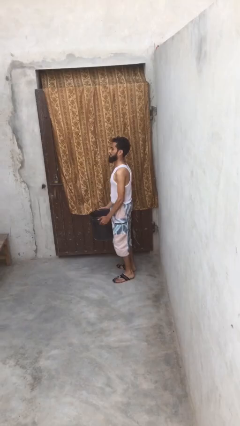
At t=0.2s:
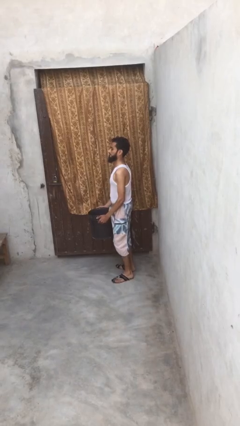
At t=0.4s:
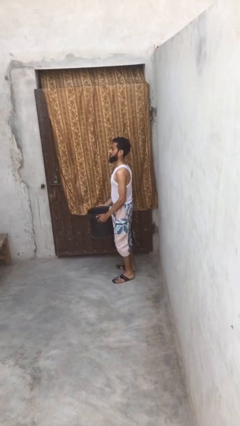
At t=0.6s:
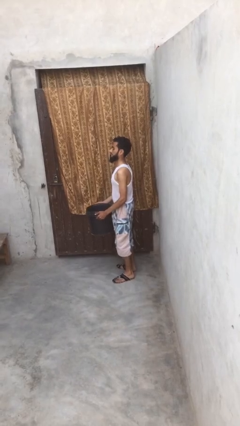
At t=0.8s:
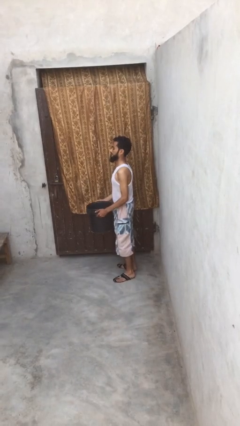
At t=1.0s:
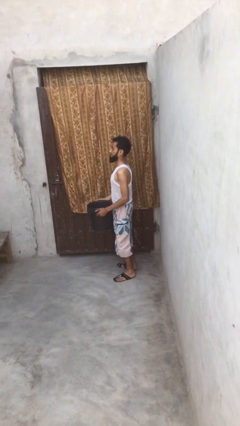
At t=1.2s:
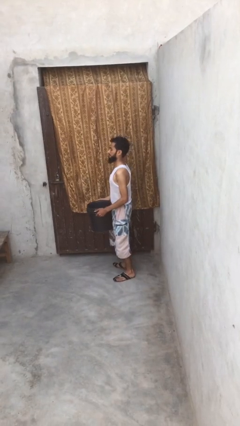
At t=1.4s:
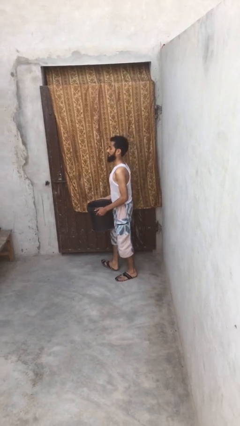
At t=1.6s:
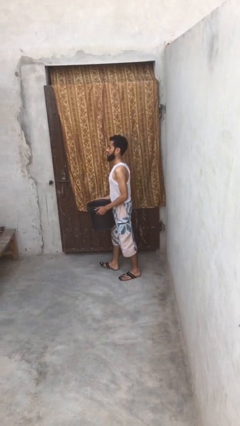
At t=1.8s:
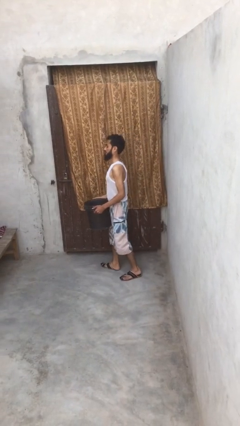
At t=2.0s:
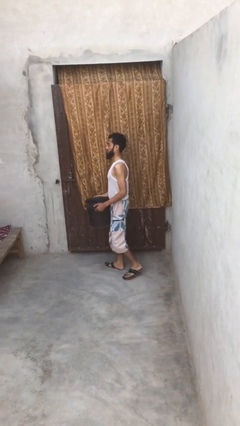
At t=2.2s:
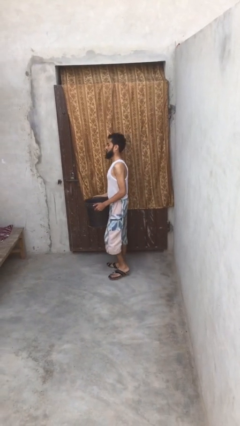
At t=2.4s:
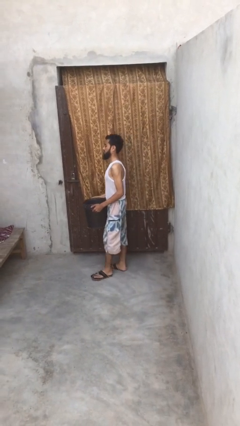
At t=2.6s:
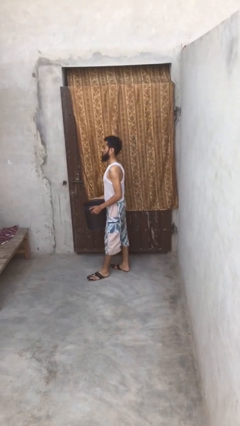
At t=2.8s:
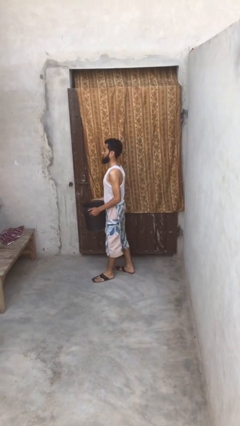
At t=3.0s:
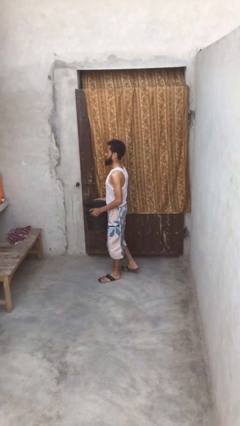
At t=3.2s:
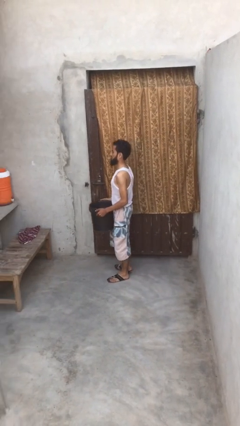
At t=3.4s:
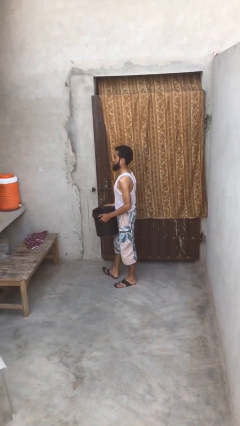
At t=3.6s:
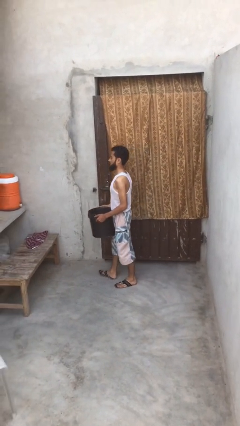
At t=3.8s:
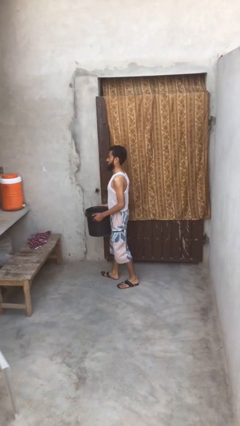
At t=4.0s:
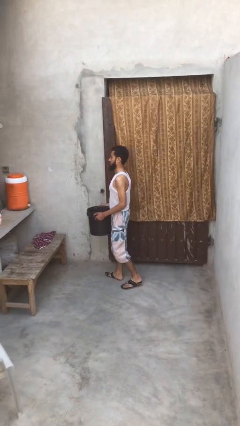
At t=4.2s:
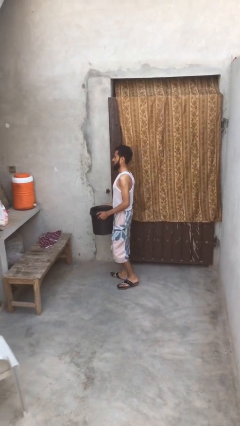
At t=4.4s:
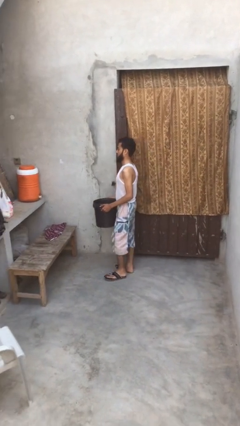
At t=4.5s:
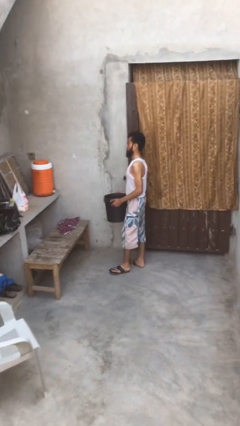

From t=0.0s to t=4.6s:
person carries heavy object

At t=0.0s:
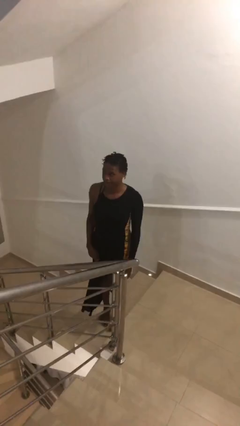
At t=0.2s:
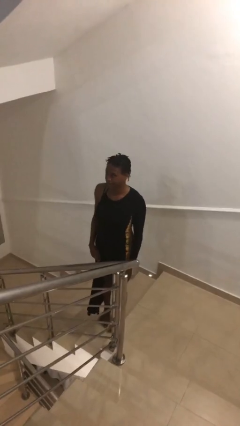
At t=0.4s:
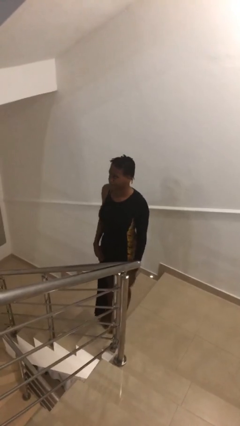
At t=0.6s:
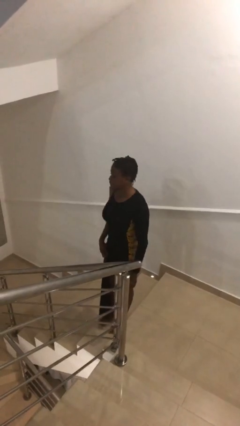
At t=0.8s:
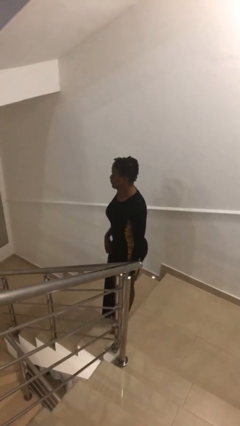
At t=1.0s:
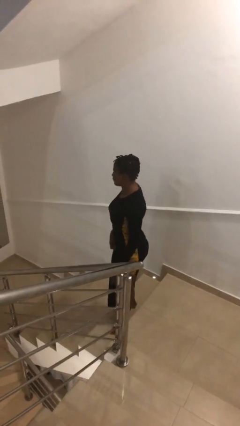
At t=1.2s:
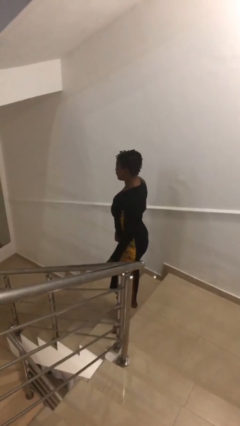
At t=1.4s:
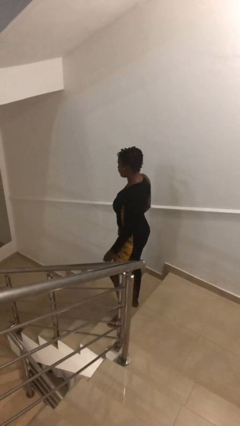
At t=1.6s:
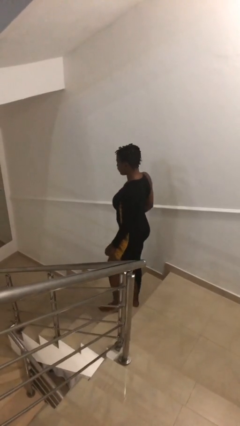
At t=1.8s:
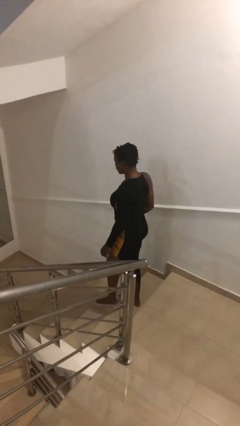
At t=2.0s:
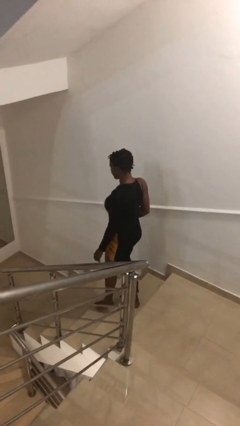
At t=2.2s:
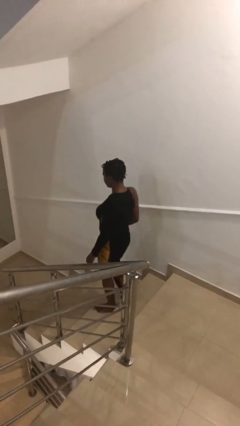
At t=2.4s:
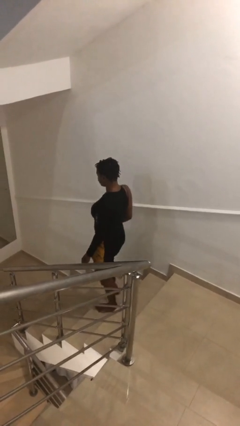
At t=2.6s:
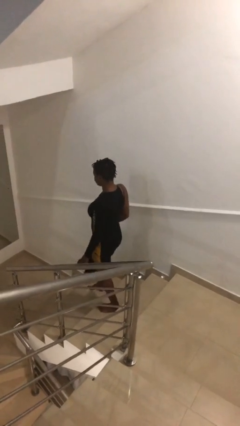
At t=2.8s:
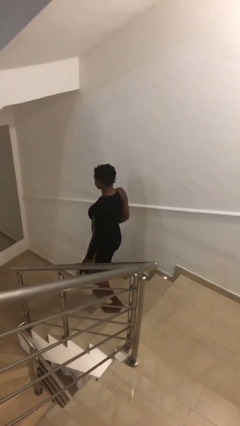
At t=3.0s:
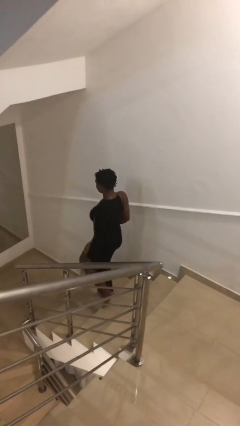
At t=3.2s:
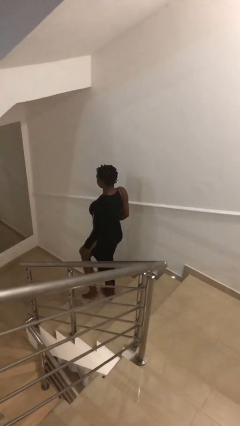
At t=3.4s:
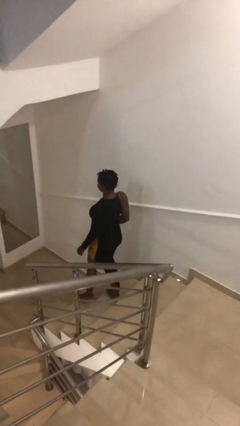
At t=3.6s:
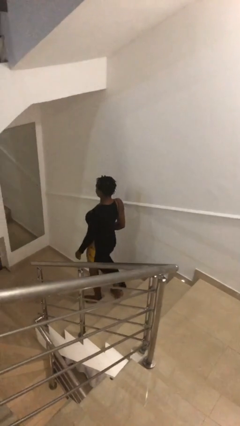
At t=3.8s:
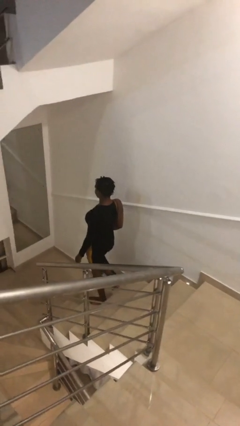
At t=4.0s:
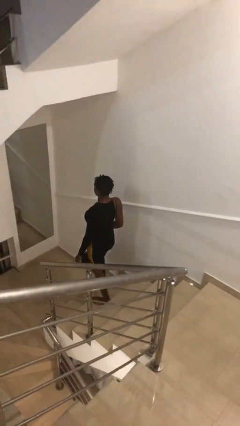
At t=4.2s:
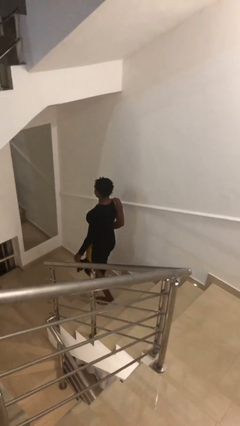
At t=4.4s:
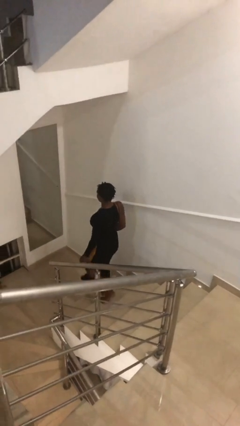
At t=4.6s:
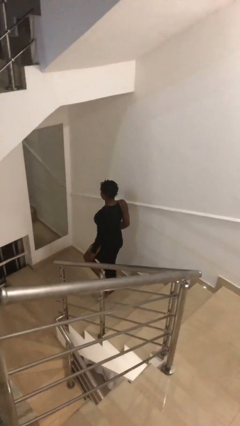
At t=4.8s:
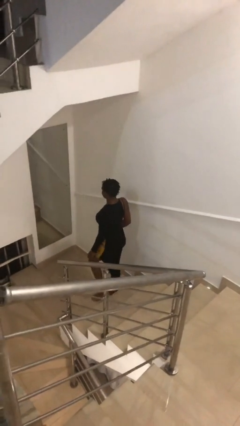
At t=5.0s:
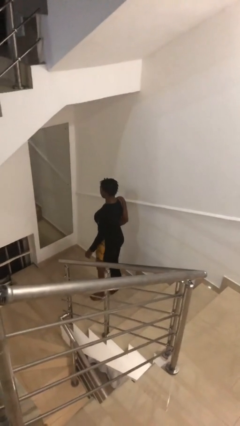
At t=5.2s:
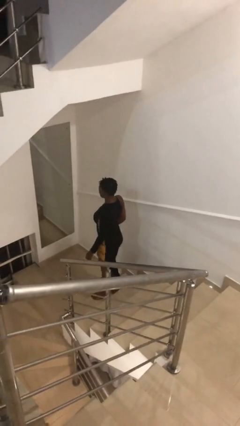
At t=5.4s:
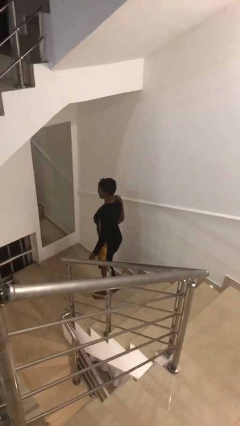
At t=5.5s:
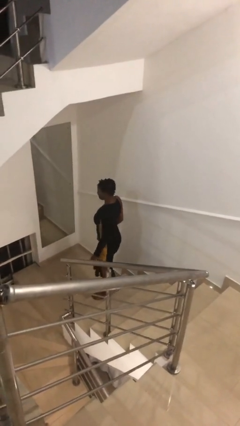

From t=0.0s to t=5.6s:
person climbs down stairs

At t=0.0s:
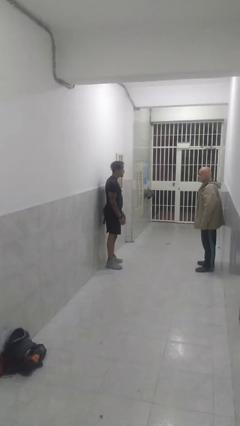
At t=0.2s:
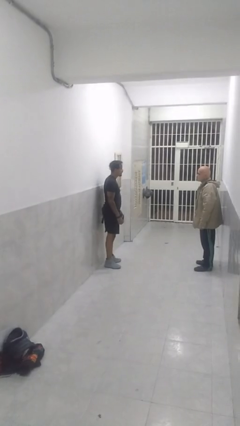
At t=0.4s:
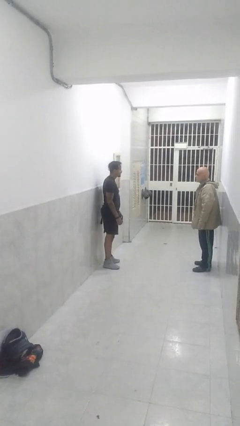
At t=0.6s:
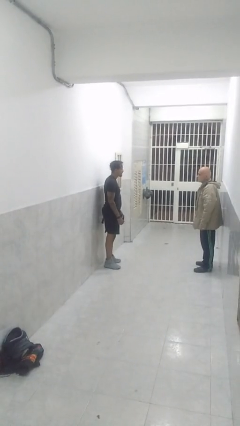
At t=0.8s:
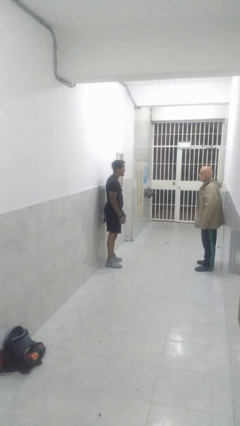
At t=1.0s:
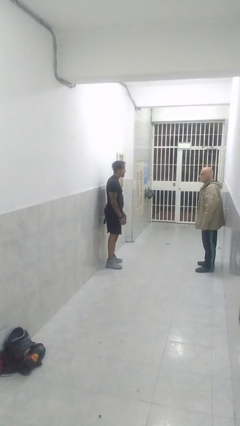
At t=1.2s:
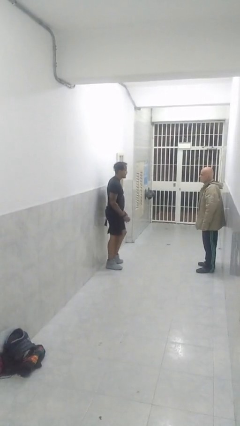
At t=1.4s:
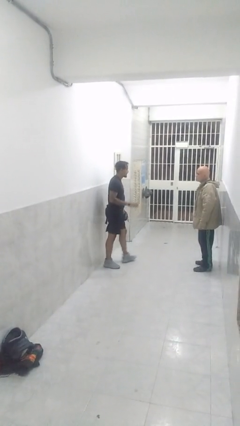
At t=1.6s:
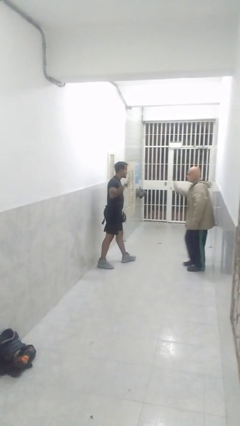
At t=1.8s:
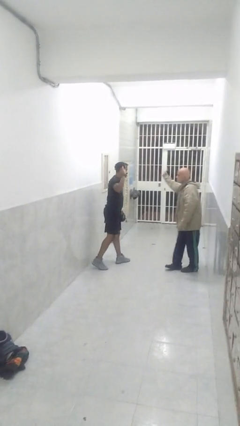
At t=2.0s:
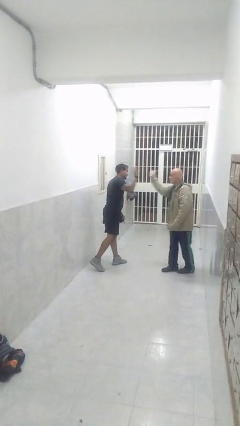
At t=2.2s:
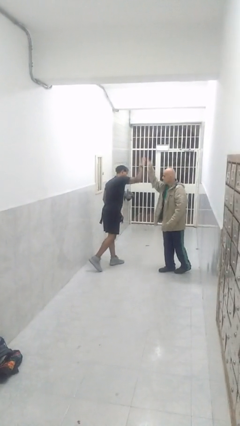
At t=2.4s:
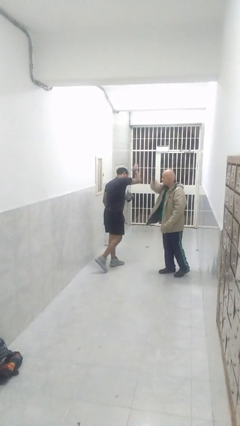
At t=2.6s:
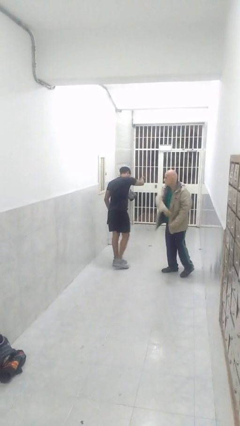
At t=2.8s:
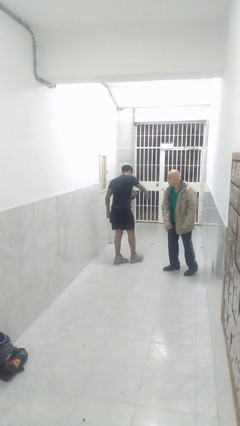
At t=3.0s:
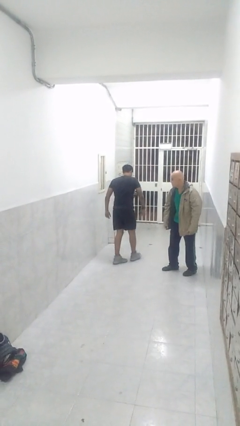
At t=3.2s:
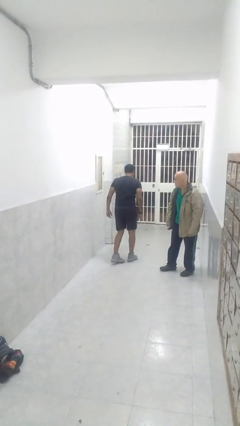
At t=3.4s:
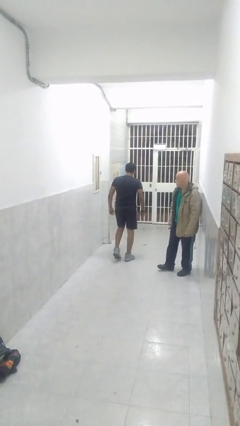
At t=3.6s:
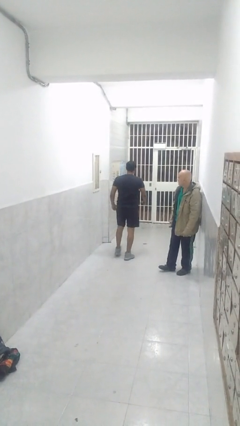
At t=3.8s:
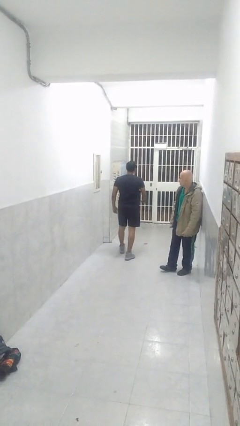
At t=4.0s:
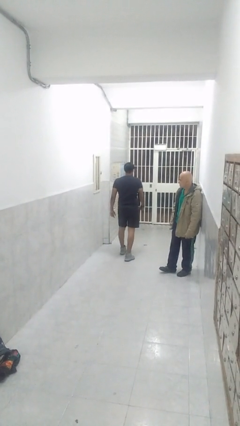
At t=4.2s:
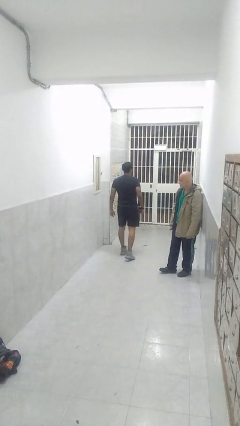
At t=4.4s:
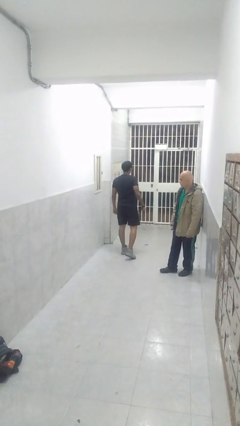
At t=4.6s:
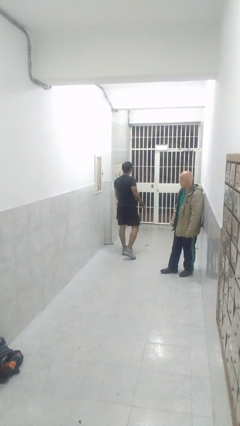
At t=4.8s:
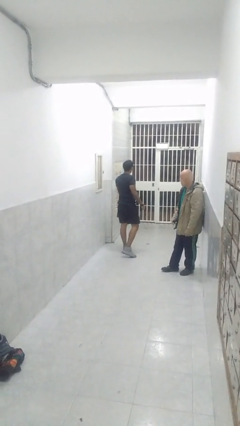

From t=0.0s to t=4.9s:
person highfives hand

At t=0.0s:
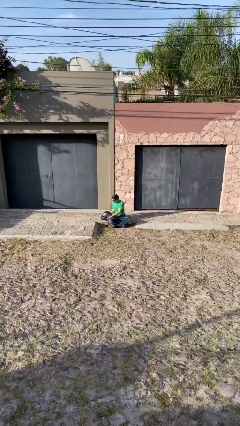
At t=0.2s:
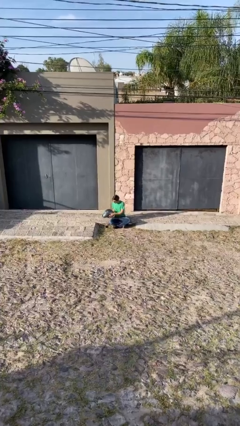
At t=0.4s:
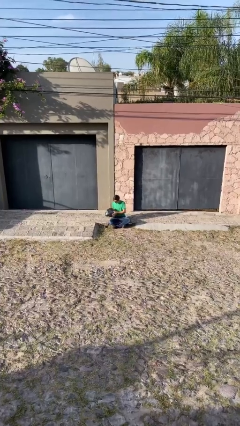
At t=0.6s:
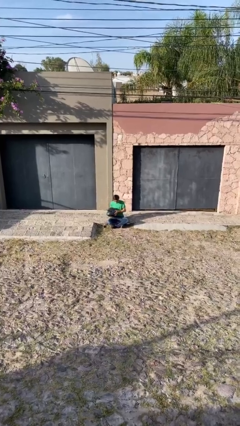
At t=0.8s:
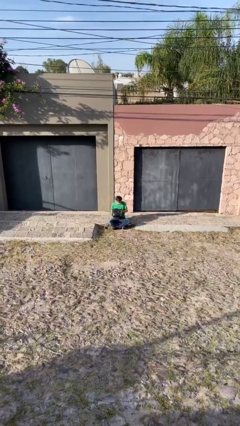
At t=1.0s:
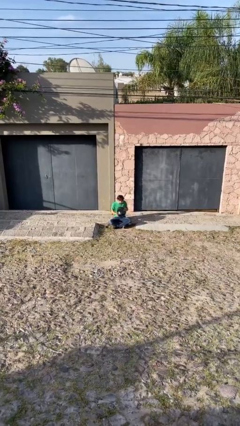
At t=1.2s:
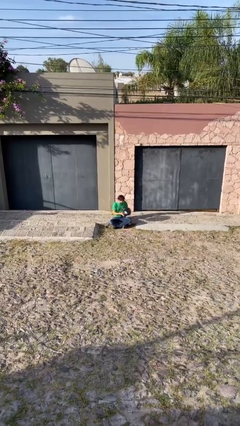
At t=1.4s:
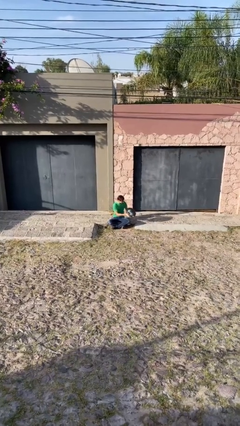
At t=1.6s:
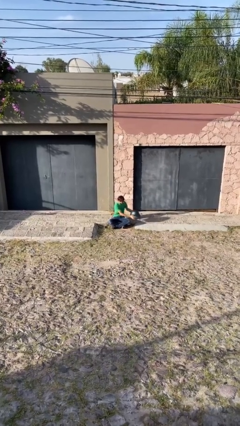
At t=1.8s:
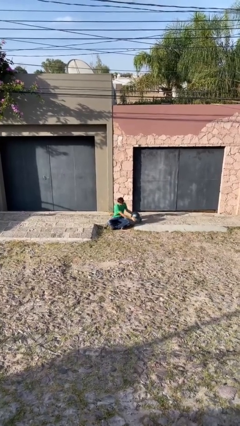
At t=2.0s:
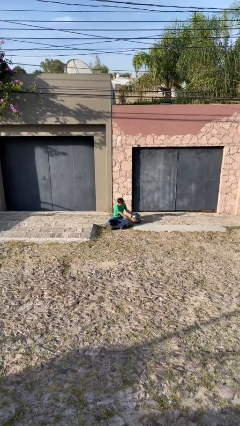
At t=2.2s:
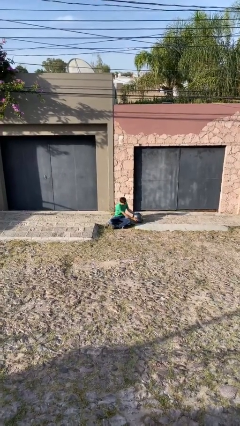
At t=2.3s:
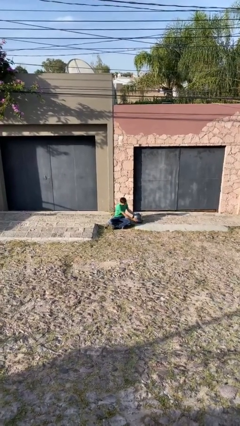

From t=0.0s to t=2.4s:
person picks up object from floor
